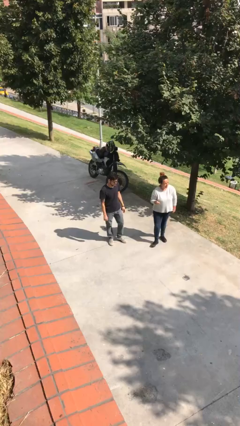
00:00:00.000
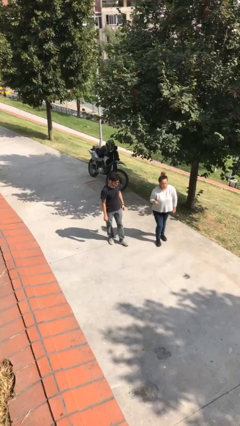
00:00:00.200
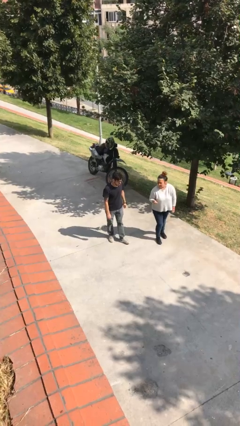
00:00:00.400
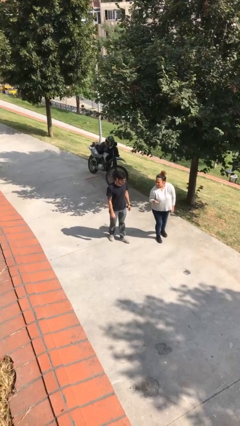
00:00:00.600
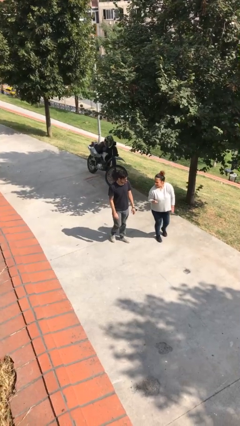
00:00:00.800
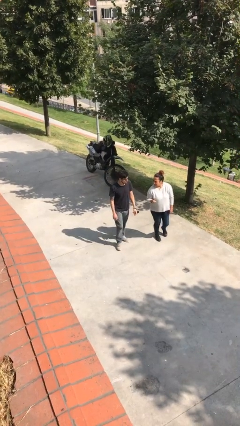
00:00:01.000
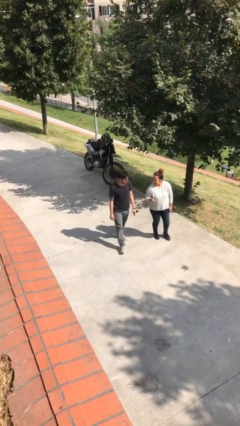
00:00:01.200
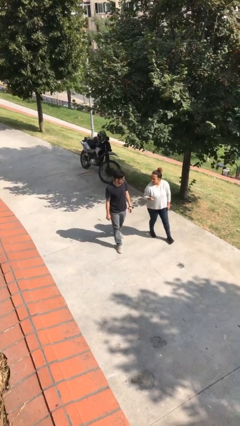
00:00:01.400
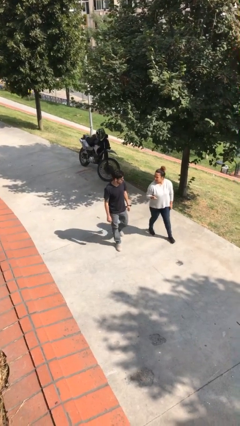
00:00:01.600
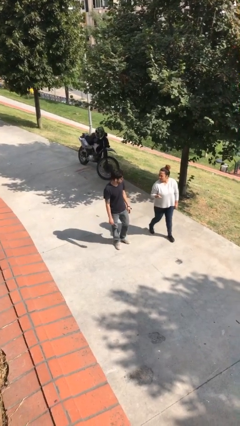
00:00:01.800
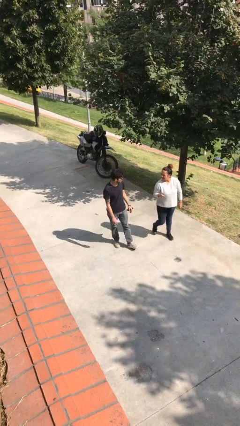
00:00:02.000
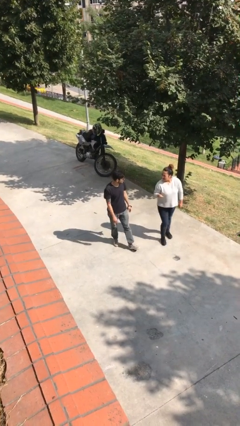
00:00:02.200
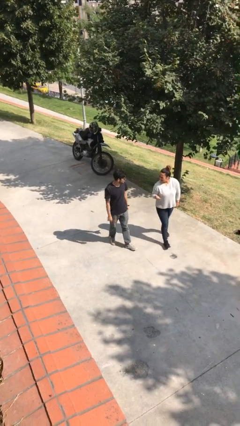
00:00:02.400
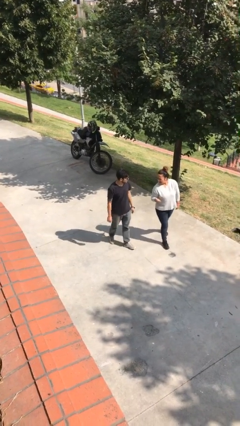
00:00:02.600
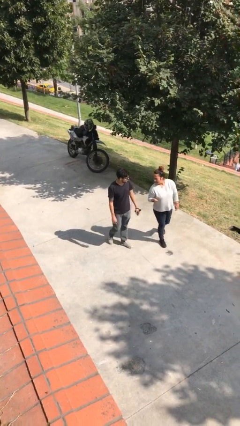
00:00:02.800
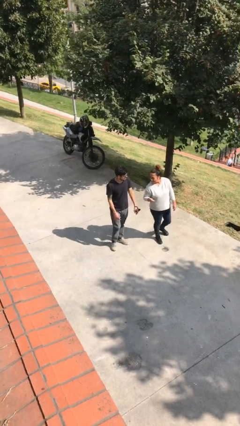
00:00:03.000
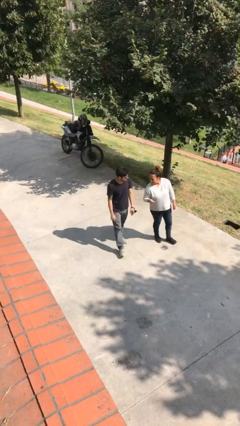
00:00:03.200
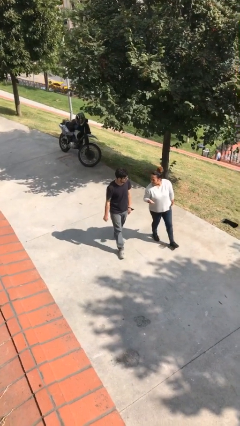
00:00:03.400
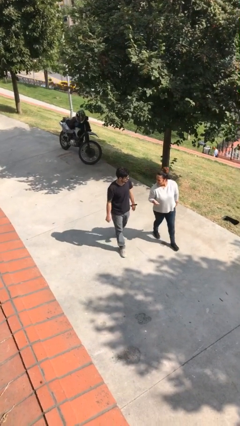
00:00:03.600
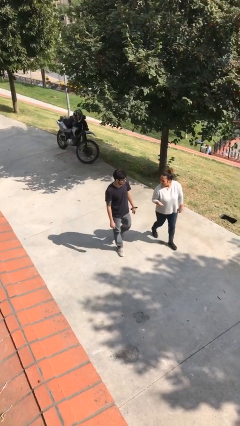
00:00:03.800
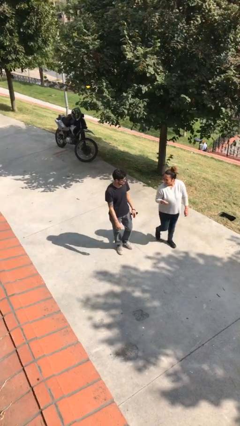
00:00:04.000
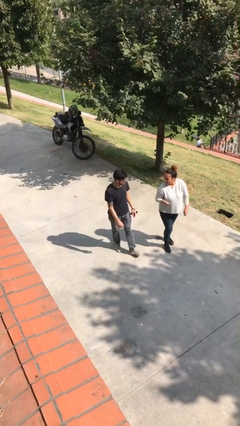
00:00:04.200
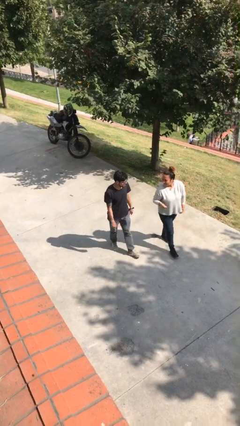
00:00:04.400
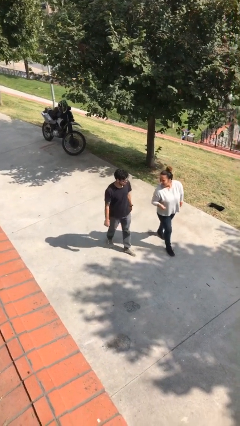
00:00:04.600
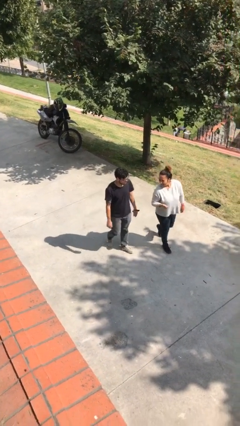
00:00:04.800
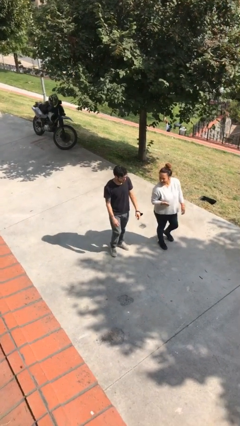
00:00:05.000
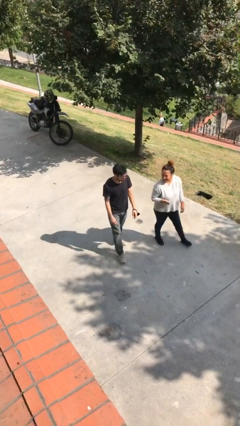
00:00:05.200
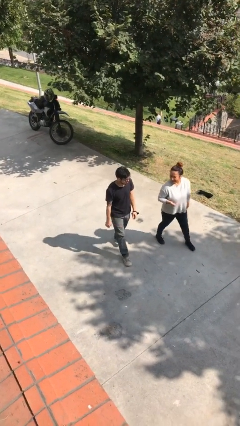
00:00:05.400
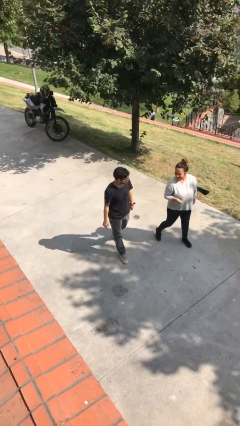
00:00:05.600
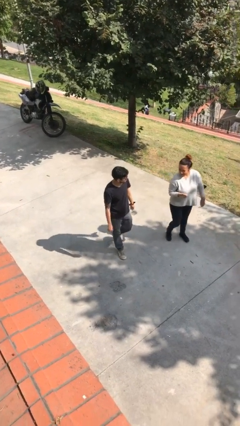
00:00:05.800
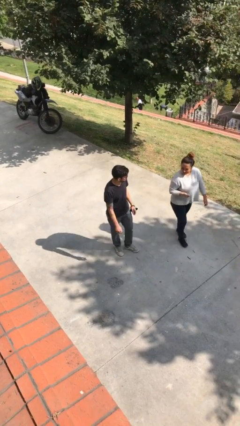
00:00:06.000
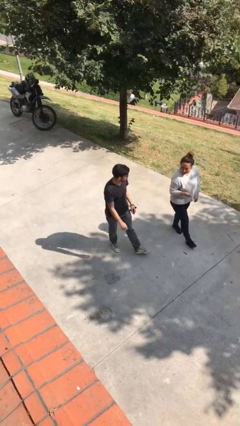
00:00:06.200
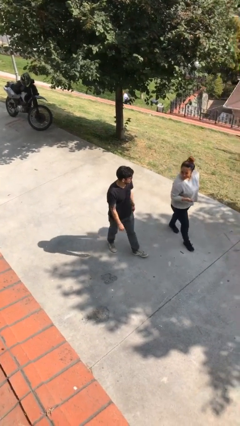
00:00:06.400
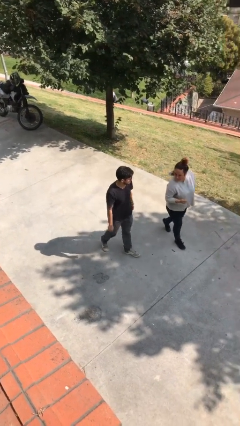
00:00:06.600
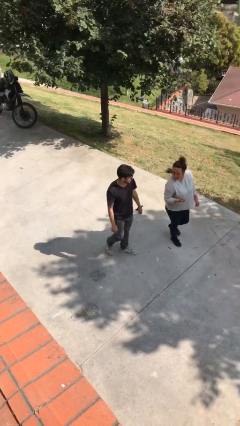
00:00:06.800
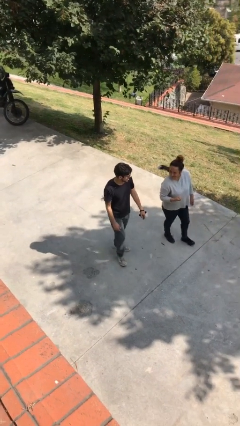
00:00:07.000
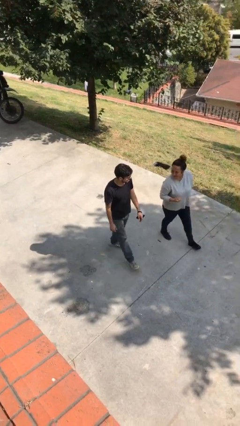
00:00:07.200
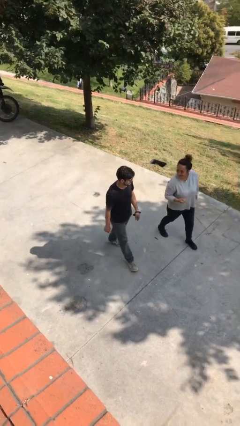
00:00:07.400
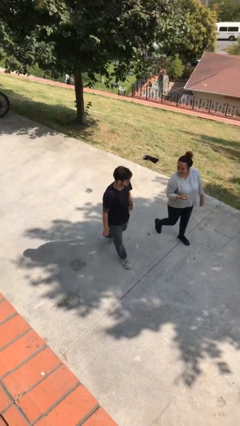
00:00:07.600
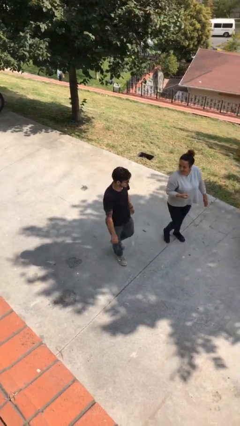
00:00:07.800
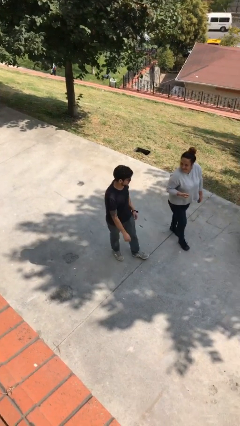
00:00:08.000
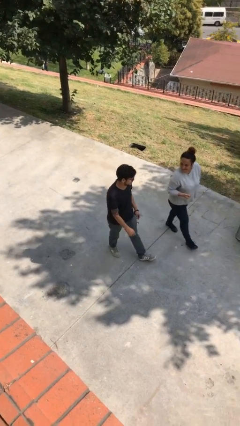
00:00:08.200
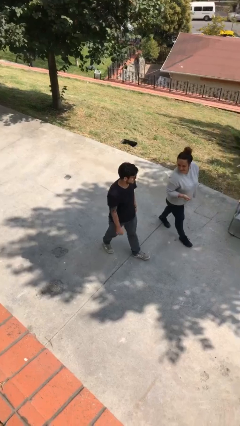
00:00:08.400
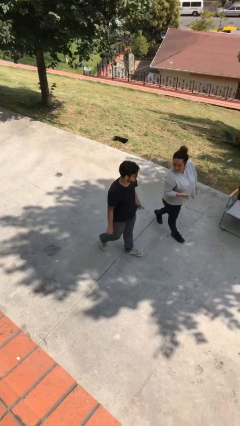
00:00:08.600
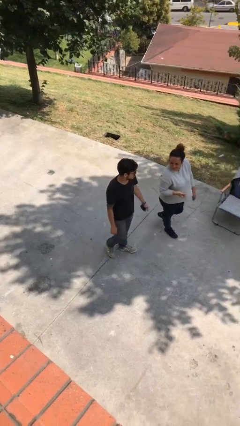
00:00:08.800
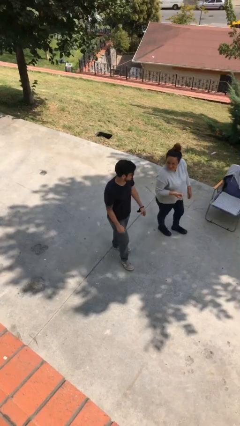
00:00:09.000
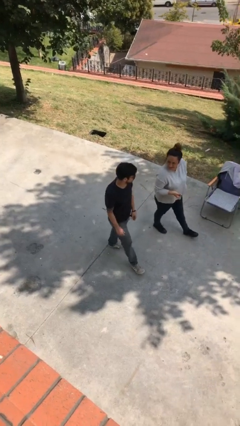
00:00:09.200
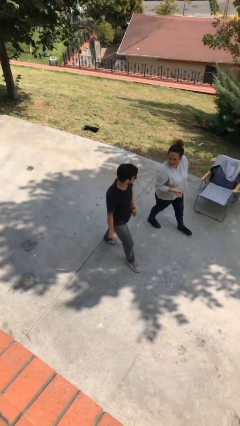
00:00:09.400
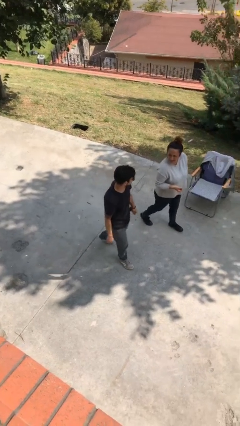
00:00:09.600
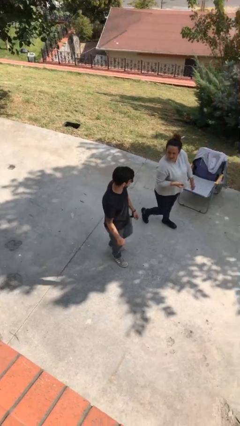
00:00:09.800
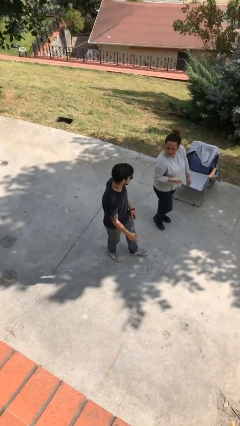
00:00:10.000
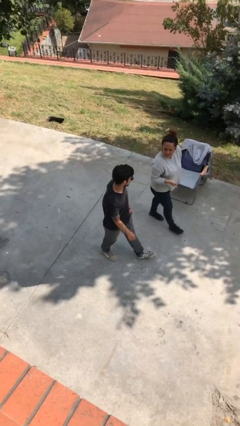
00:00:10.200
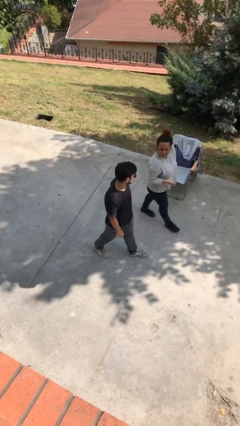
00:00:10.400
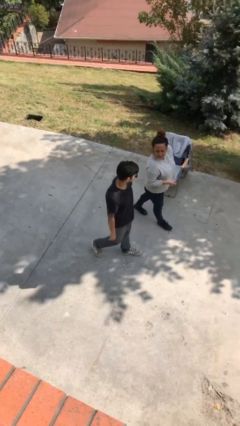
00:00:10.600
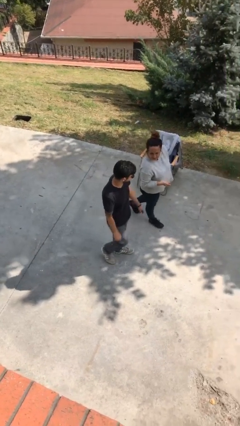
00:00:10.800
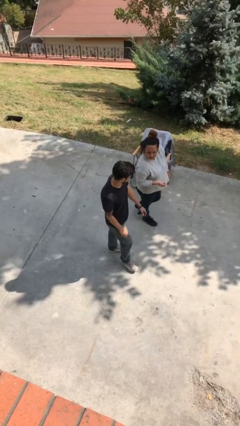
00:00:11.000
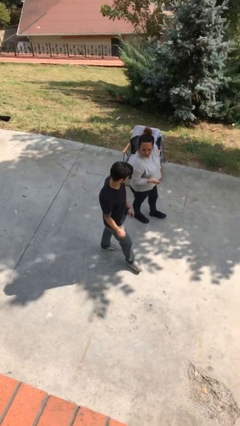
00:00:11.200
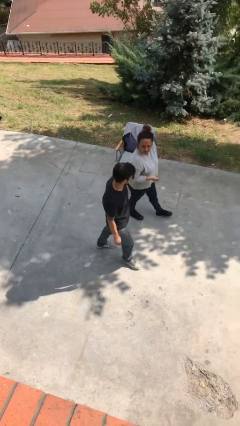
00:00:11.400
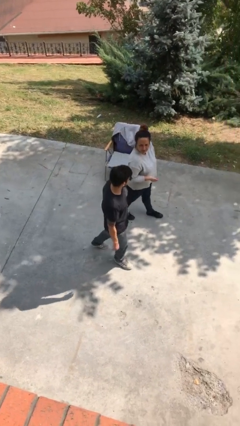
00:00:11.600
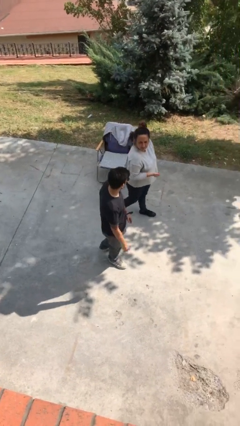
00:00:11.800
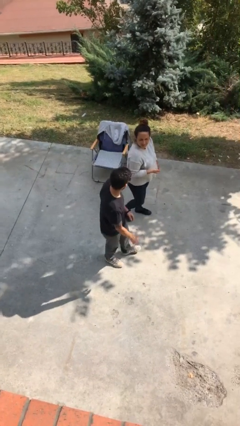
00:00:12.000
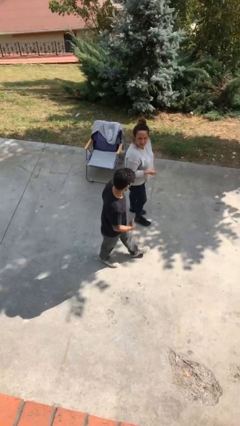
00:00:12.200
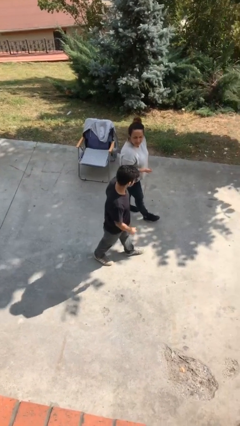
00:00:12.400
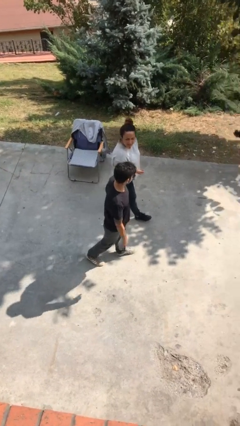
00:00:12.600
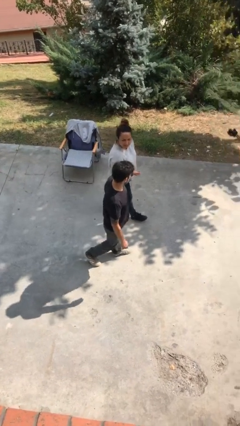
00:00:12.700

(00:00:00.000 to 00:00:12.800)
person talks to person

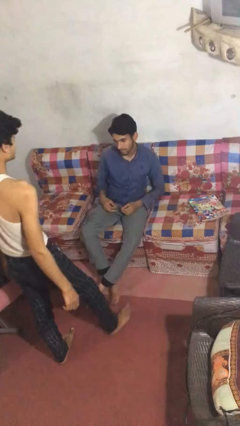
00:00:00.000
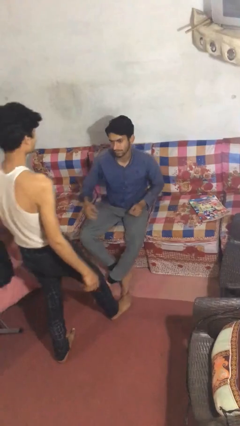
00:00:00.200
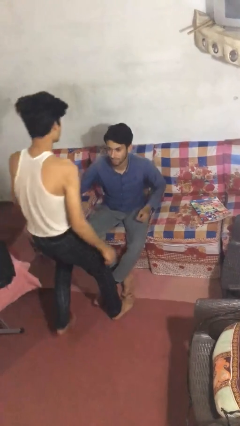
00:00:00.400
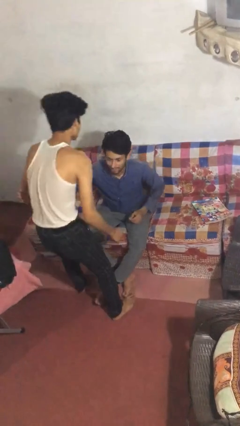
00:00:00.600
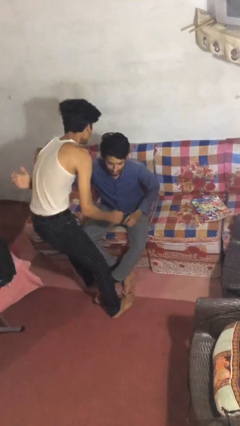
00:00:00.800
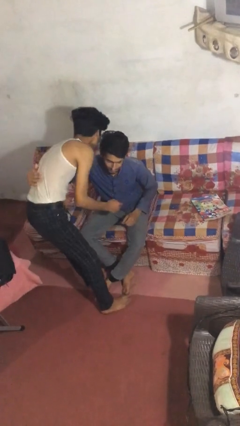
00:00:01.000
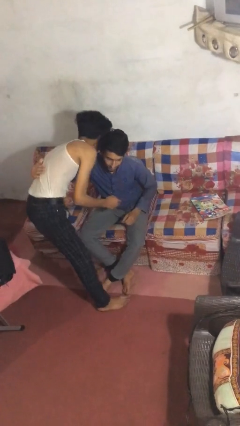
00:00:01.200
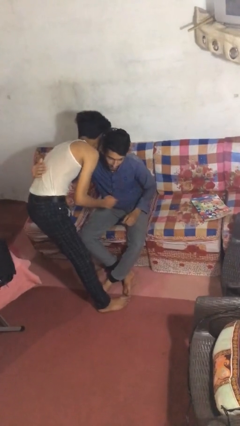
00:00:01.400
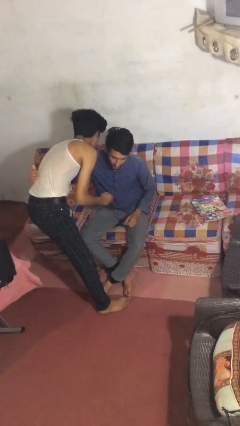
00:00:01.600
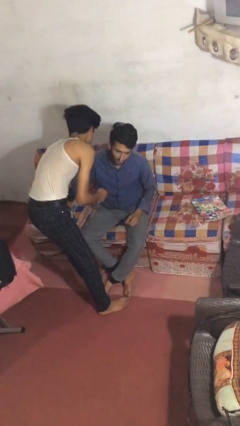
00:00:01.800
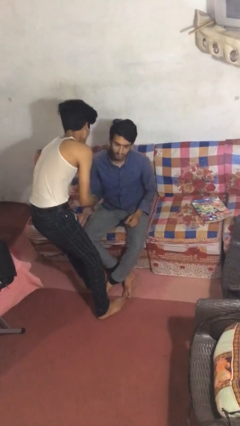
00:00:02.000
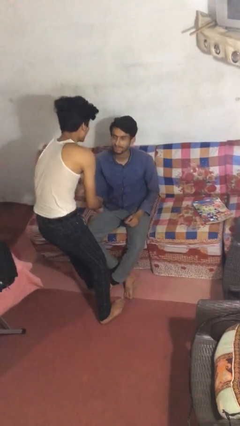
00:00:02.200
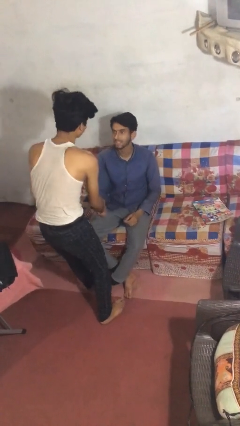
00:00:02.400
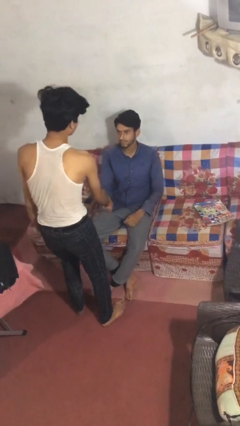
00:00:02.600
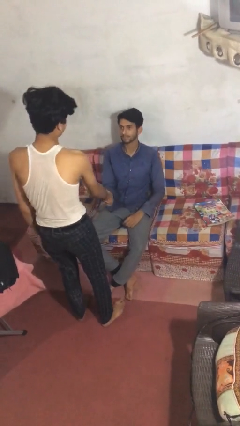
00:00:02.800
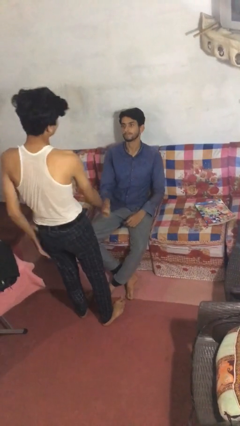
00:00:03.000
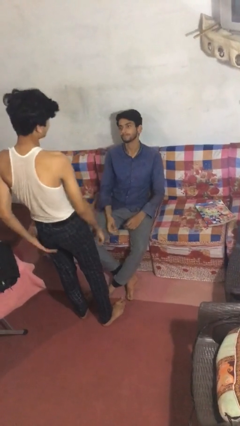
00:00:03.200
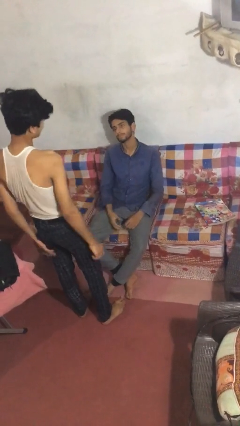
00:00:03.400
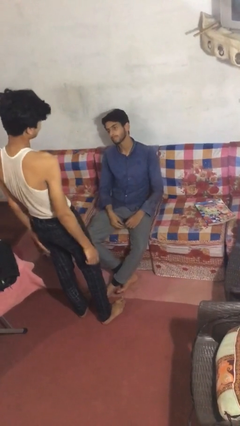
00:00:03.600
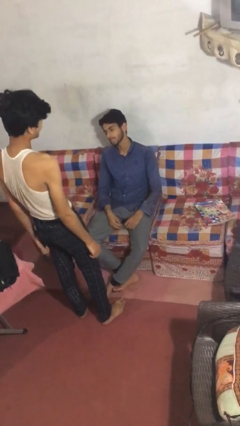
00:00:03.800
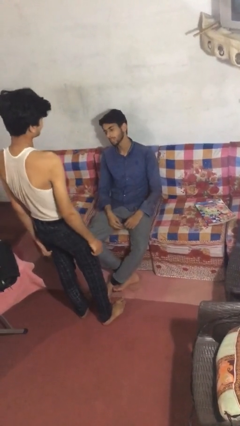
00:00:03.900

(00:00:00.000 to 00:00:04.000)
person embraces person

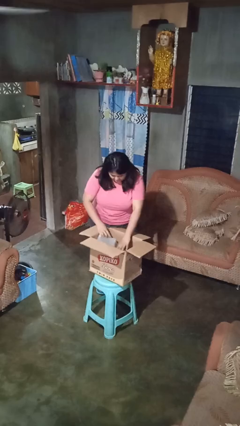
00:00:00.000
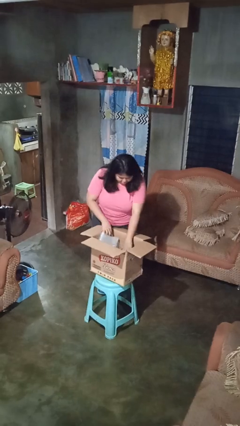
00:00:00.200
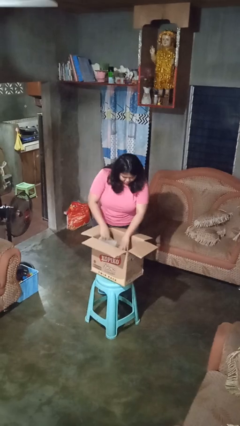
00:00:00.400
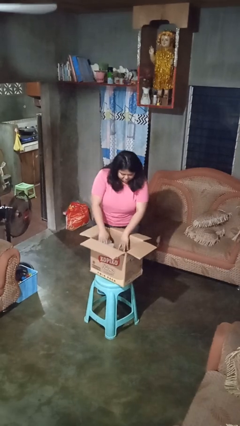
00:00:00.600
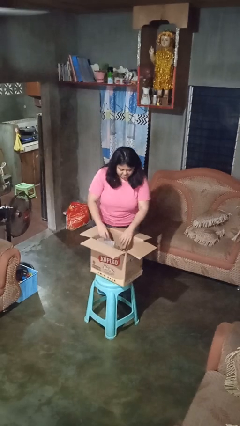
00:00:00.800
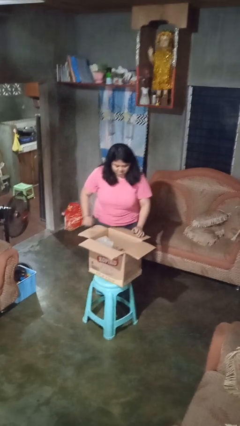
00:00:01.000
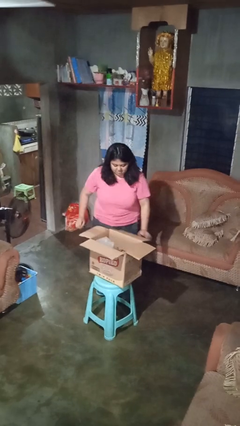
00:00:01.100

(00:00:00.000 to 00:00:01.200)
person searches in box
